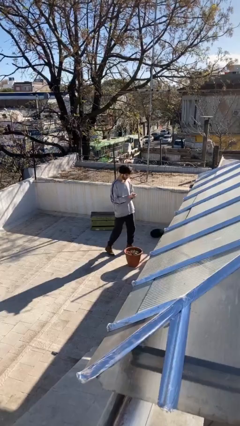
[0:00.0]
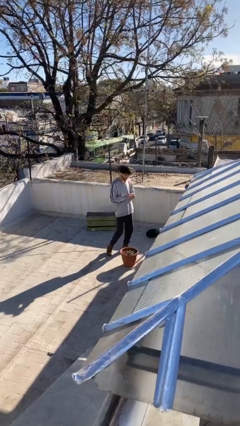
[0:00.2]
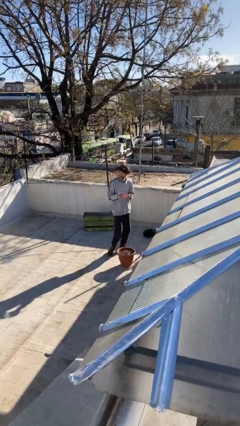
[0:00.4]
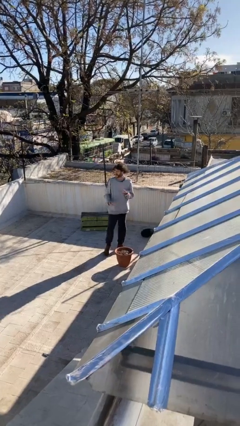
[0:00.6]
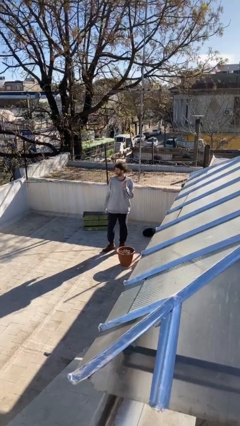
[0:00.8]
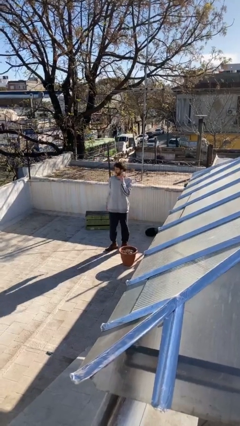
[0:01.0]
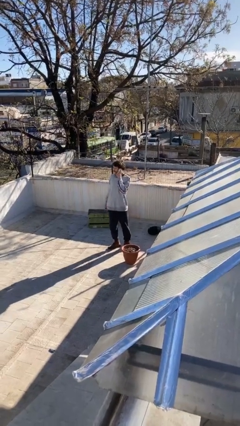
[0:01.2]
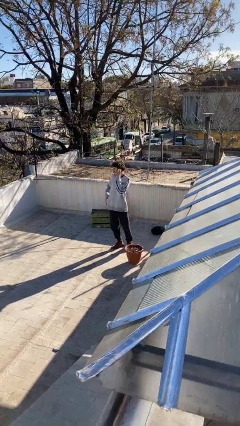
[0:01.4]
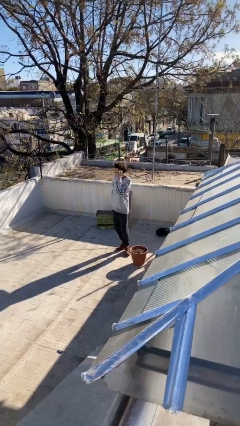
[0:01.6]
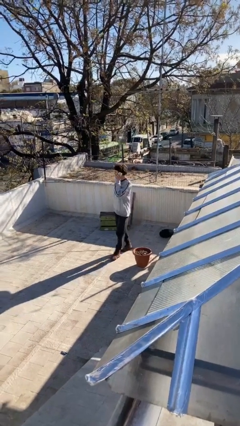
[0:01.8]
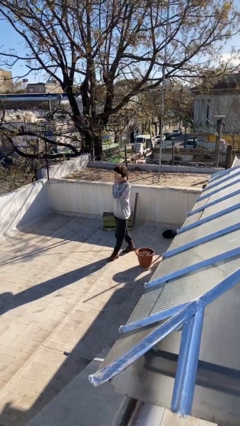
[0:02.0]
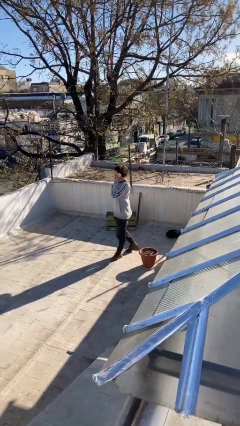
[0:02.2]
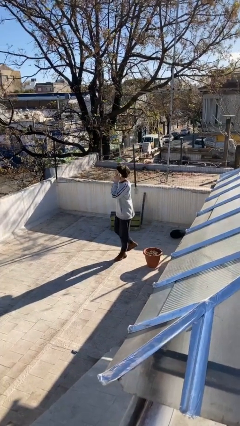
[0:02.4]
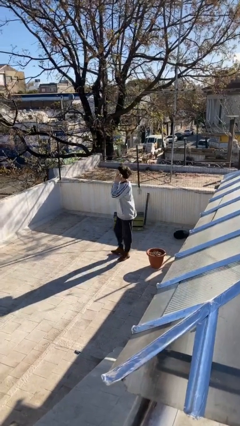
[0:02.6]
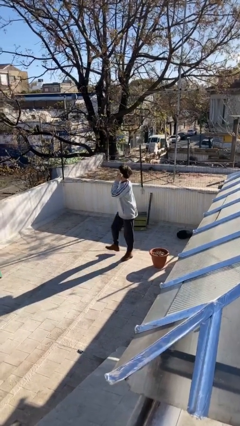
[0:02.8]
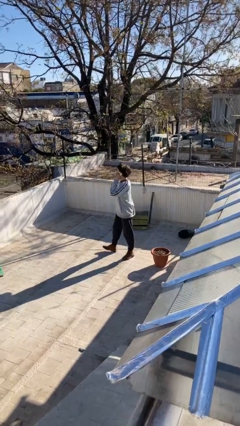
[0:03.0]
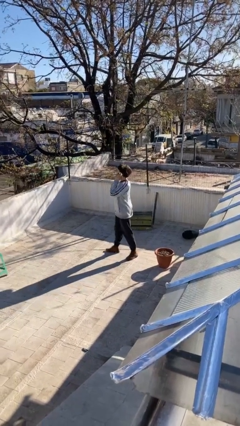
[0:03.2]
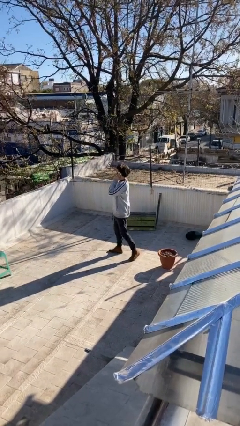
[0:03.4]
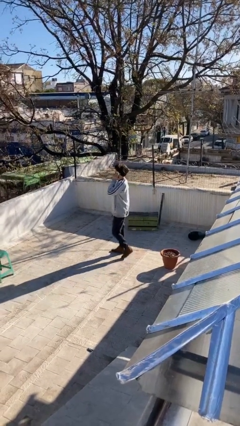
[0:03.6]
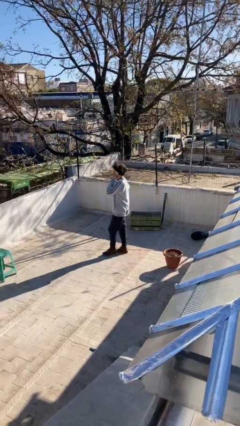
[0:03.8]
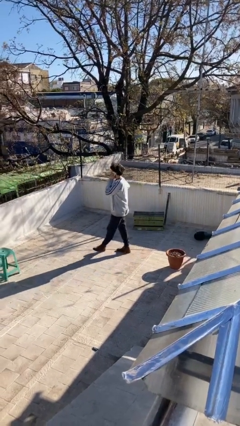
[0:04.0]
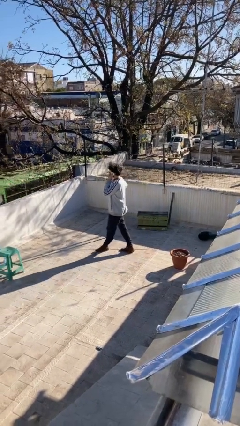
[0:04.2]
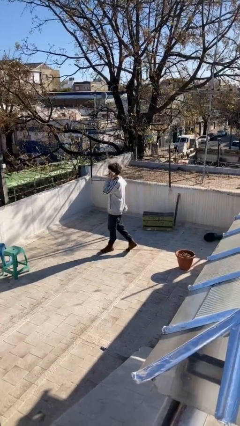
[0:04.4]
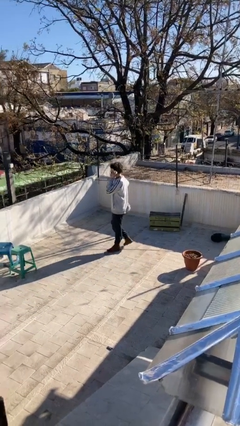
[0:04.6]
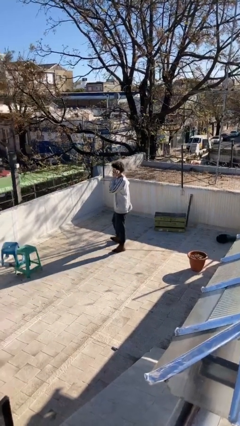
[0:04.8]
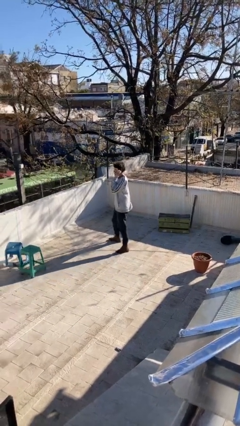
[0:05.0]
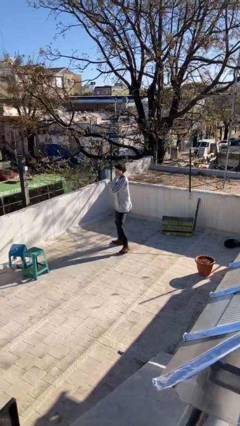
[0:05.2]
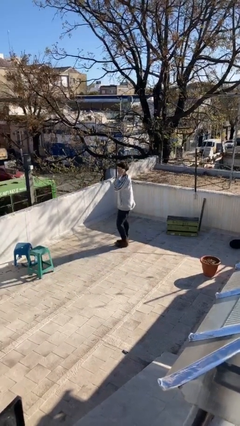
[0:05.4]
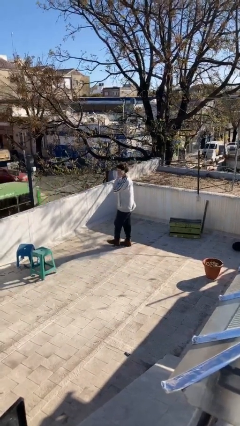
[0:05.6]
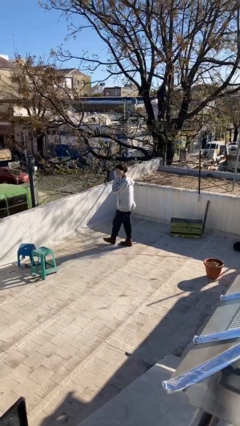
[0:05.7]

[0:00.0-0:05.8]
person talks on phone

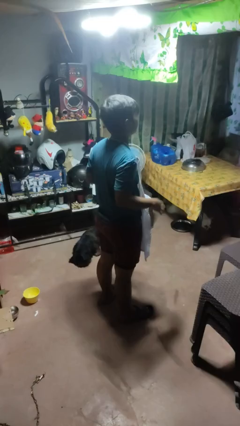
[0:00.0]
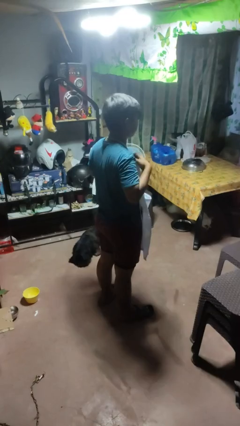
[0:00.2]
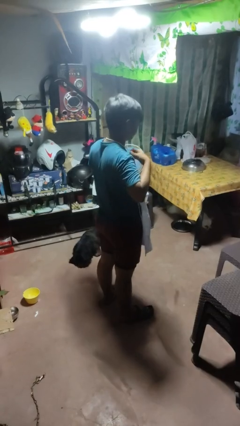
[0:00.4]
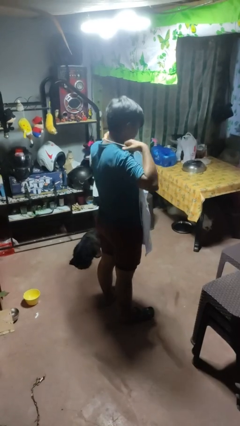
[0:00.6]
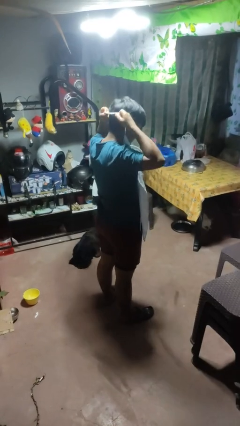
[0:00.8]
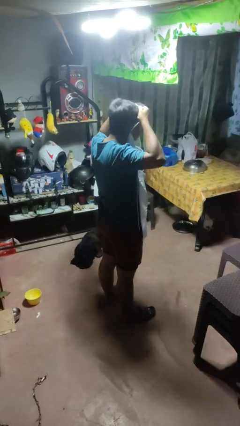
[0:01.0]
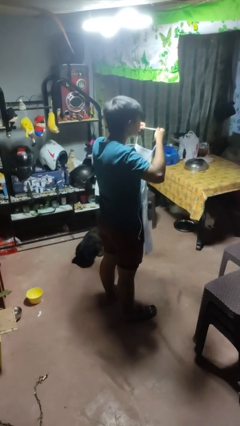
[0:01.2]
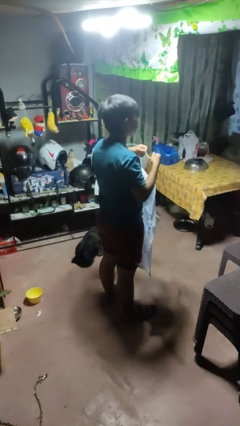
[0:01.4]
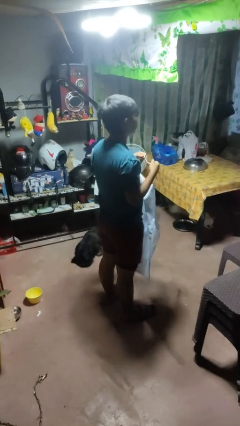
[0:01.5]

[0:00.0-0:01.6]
person takes off apron

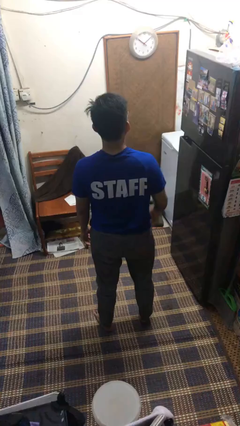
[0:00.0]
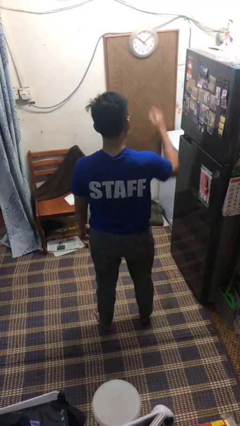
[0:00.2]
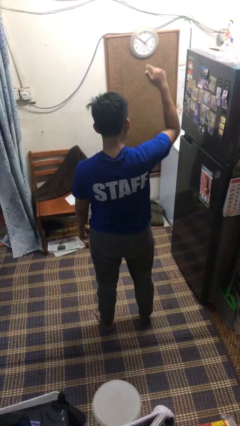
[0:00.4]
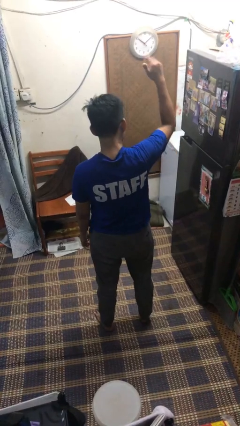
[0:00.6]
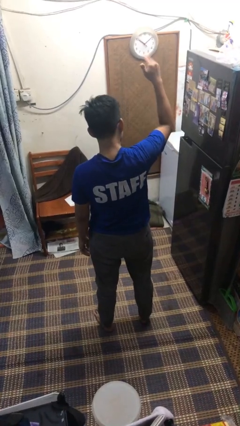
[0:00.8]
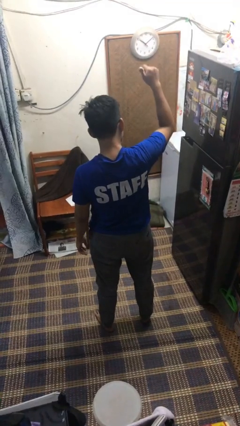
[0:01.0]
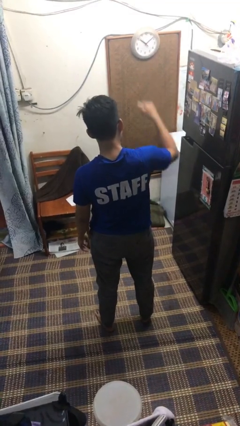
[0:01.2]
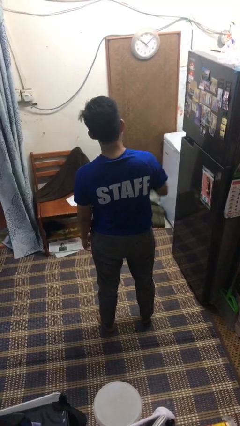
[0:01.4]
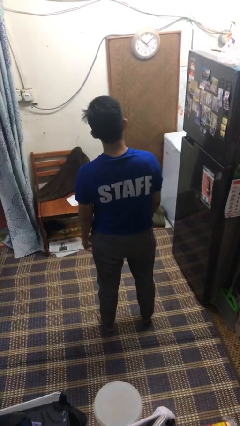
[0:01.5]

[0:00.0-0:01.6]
person gestures come here

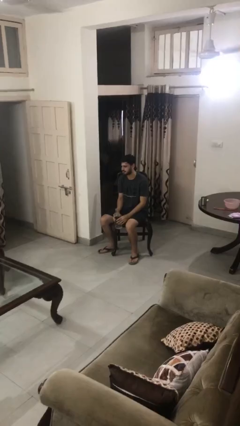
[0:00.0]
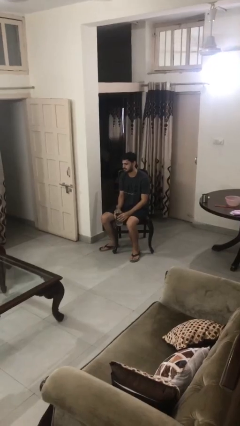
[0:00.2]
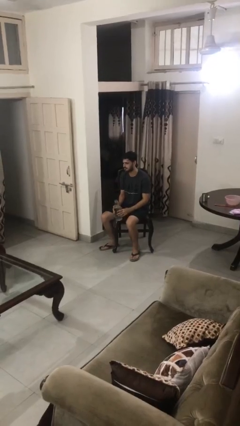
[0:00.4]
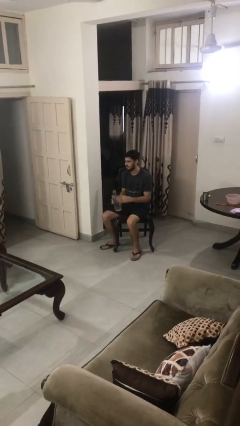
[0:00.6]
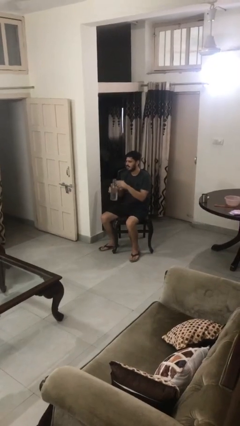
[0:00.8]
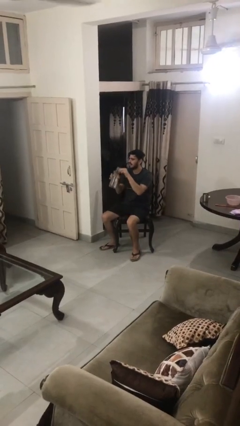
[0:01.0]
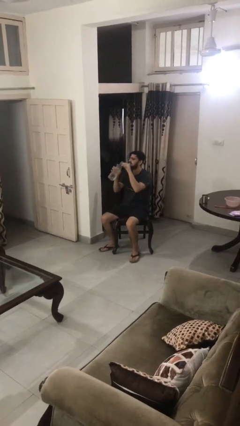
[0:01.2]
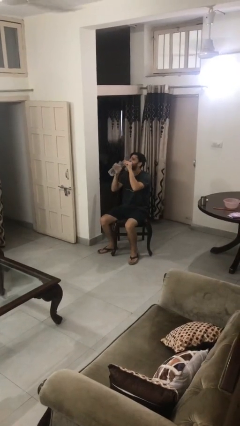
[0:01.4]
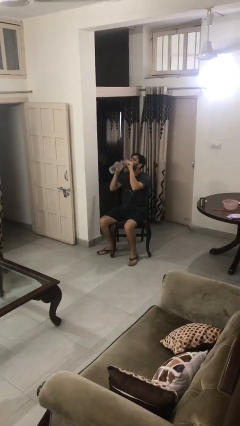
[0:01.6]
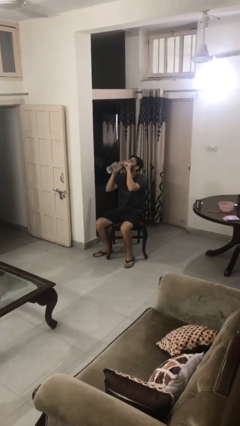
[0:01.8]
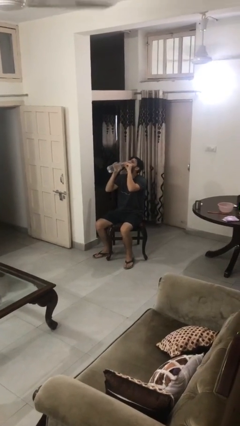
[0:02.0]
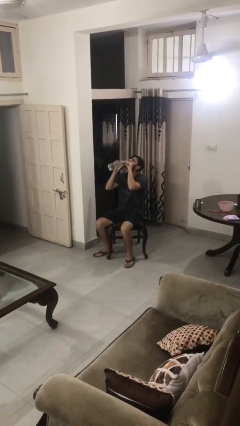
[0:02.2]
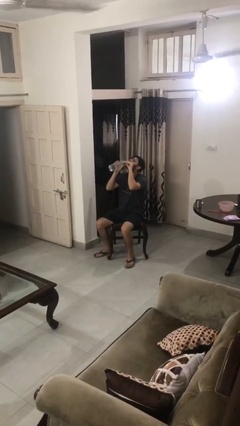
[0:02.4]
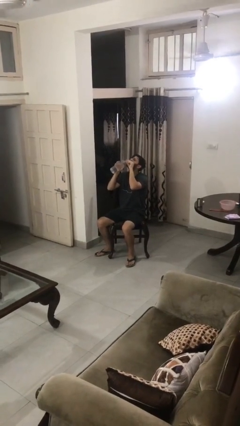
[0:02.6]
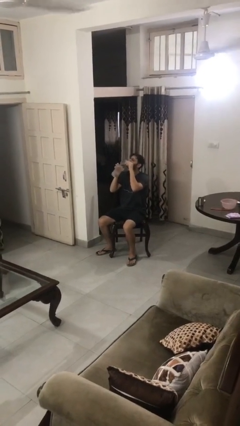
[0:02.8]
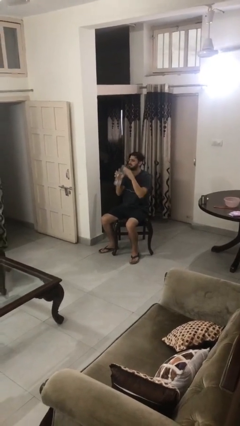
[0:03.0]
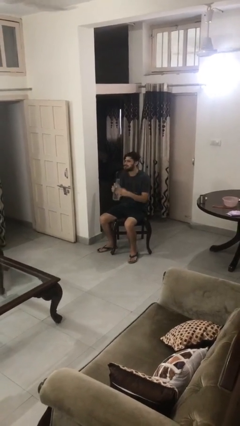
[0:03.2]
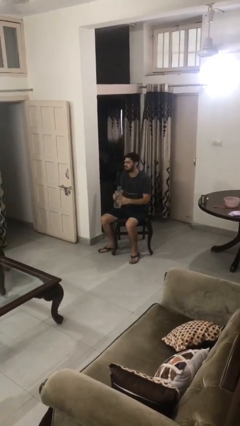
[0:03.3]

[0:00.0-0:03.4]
person drinks from bottle

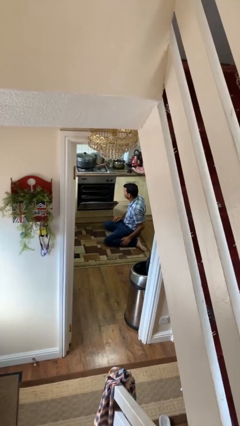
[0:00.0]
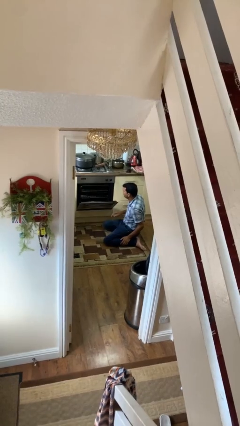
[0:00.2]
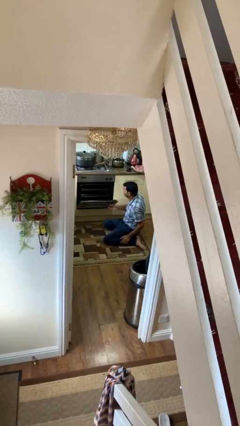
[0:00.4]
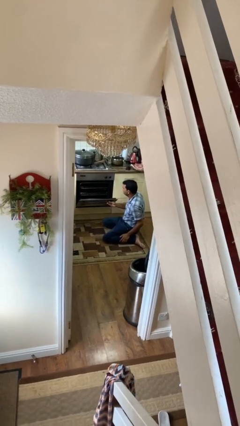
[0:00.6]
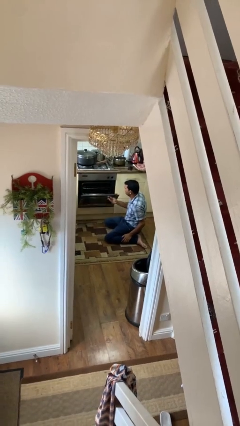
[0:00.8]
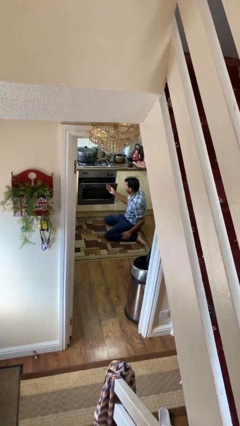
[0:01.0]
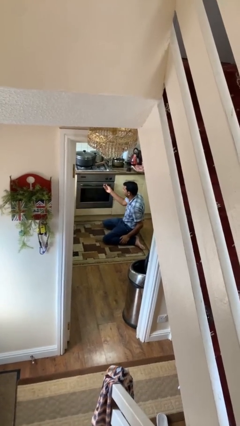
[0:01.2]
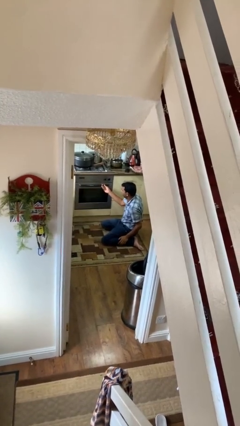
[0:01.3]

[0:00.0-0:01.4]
person closes oven door

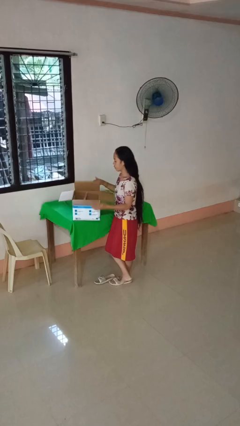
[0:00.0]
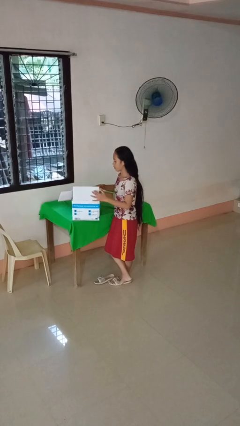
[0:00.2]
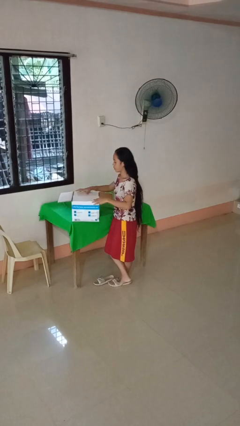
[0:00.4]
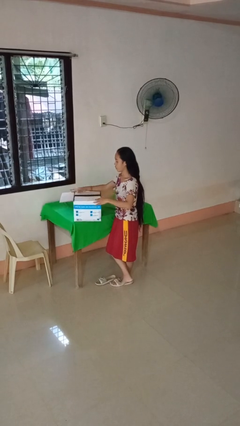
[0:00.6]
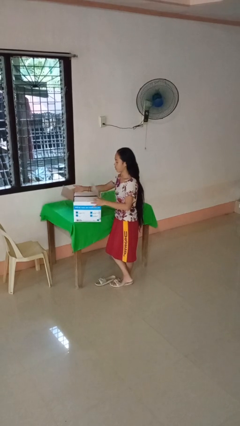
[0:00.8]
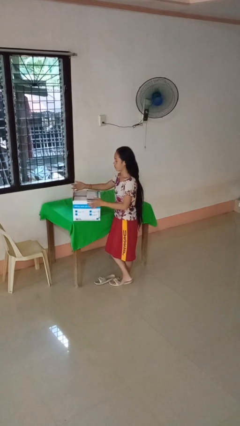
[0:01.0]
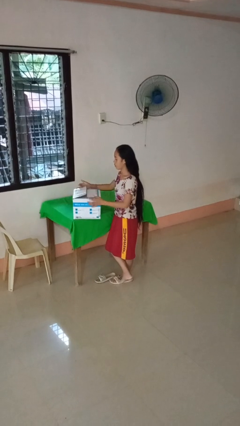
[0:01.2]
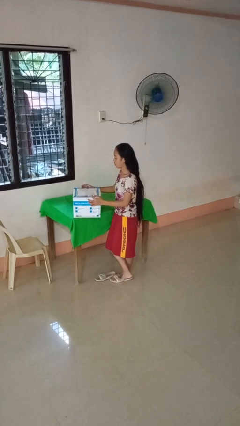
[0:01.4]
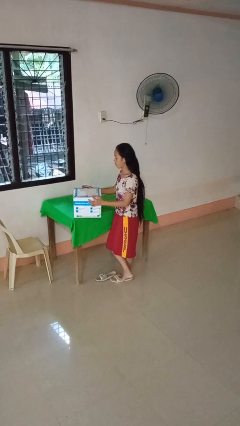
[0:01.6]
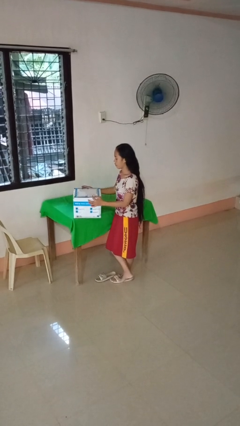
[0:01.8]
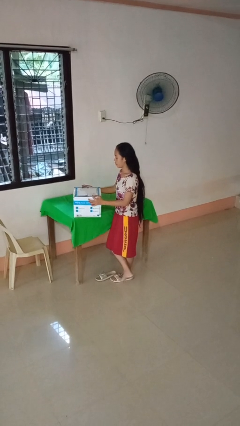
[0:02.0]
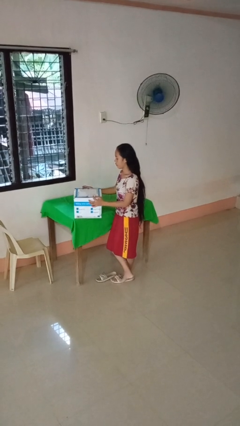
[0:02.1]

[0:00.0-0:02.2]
person closes box

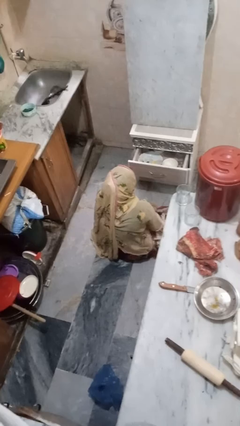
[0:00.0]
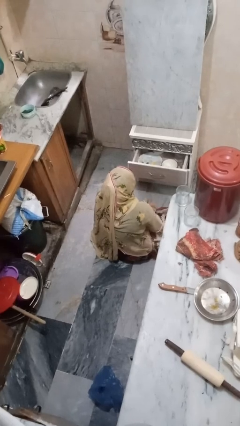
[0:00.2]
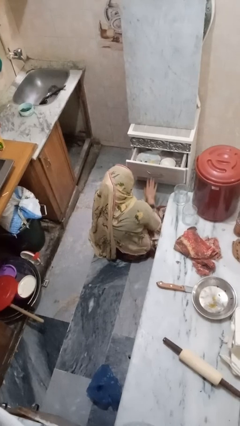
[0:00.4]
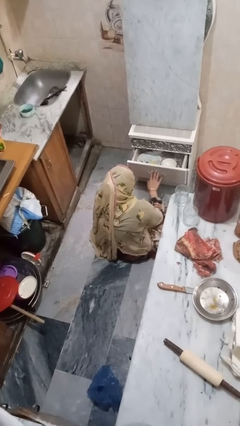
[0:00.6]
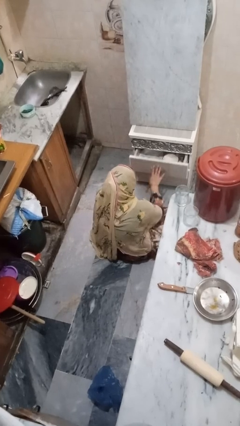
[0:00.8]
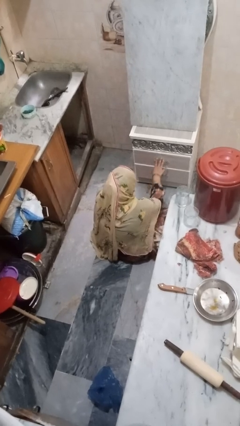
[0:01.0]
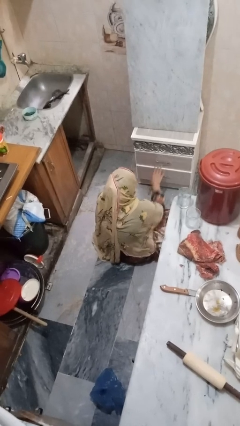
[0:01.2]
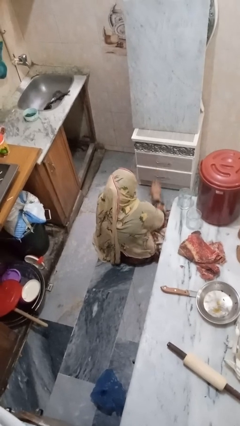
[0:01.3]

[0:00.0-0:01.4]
person closes kitchen drawer
